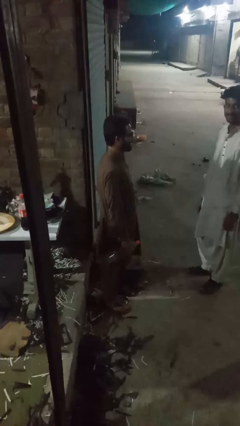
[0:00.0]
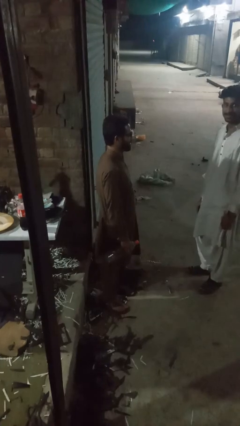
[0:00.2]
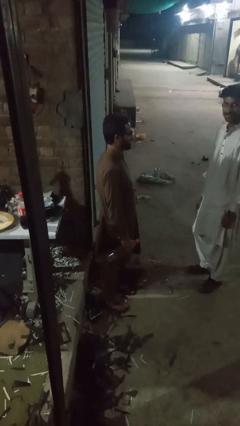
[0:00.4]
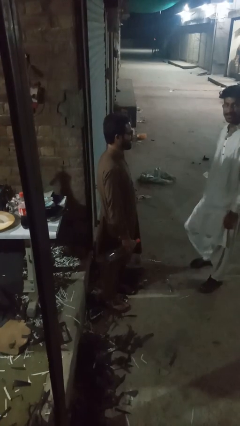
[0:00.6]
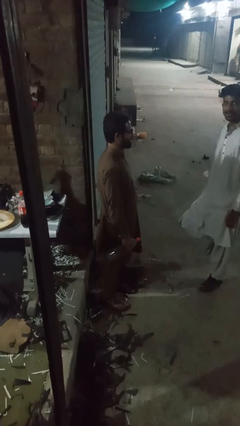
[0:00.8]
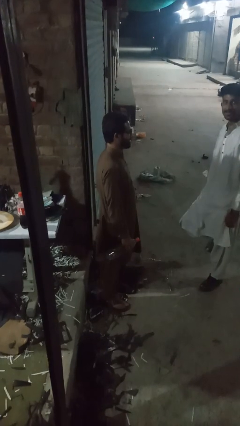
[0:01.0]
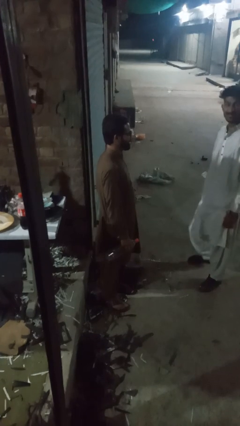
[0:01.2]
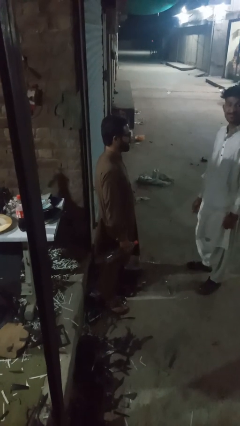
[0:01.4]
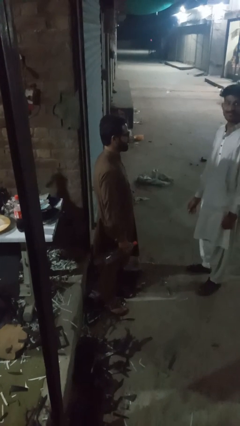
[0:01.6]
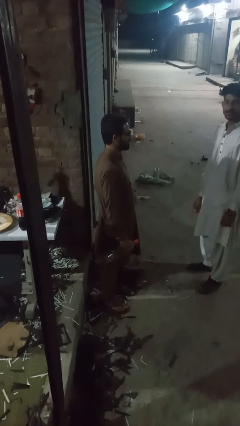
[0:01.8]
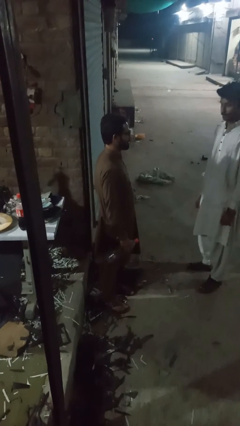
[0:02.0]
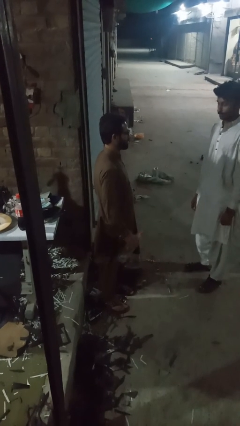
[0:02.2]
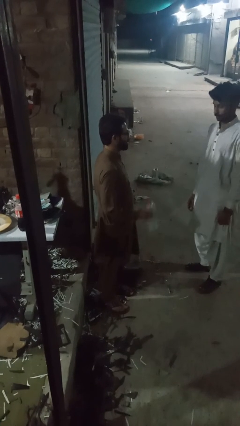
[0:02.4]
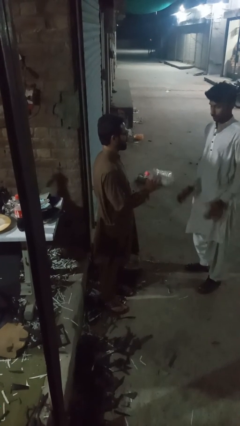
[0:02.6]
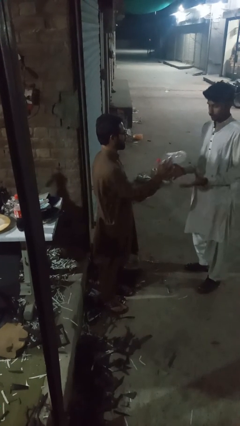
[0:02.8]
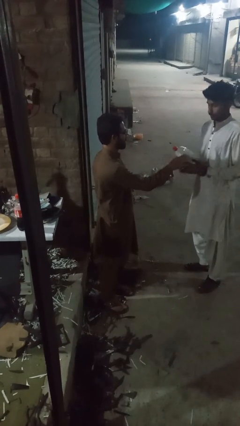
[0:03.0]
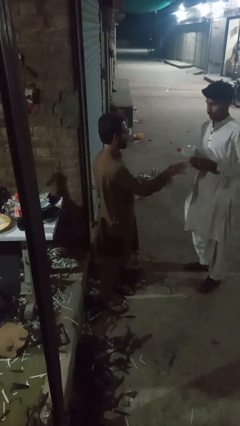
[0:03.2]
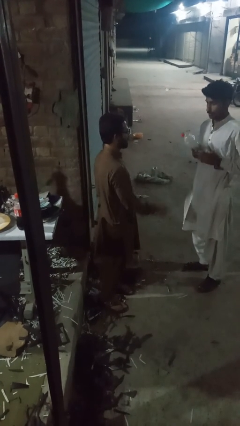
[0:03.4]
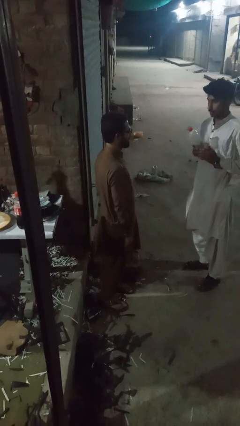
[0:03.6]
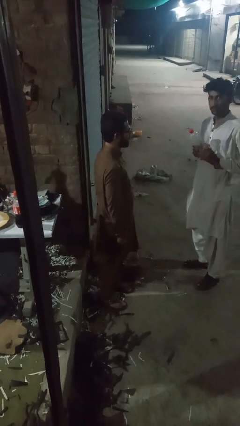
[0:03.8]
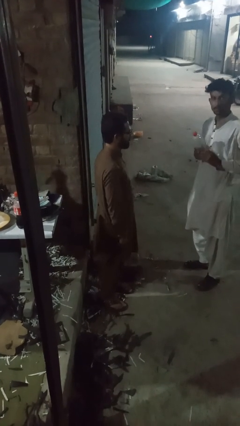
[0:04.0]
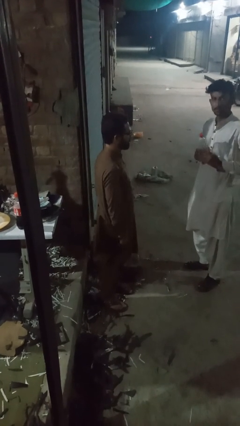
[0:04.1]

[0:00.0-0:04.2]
person throws object to person

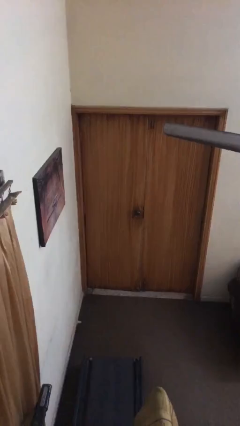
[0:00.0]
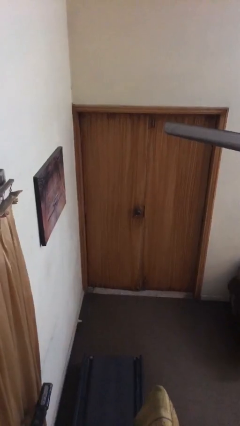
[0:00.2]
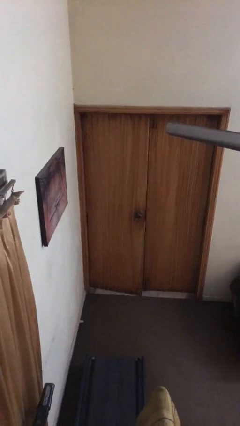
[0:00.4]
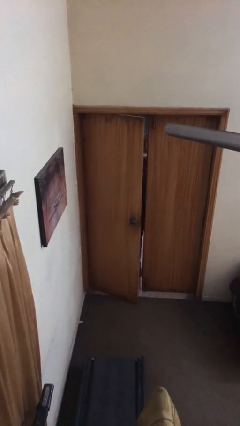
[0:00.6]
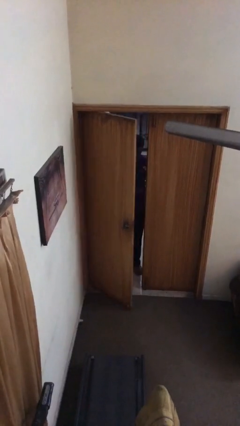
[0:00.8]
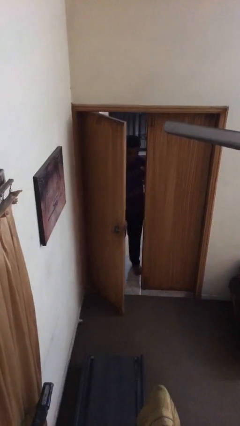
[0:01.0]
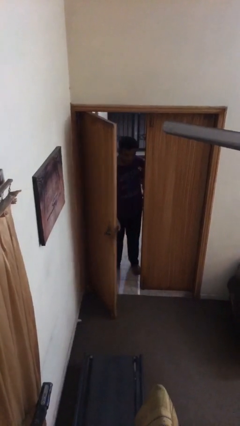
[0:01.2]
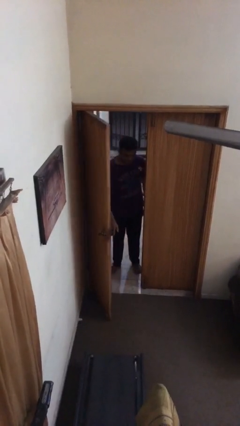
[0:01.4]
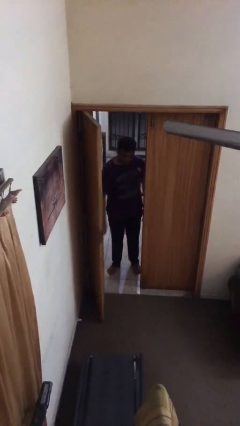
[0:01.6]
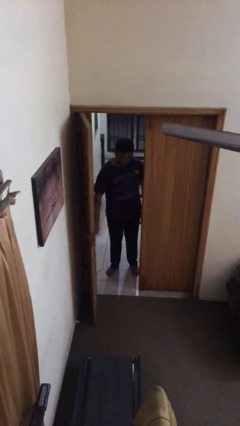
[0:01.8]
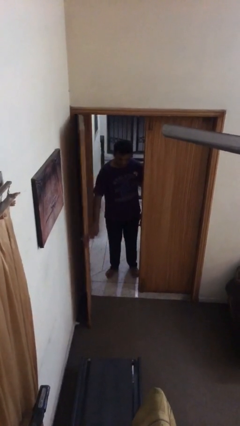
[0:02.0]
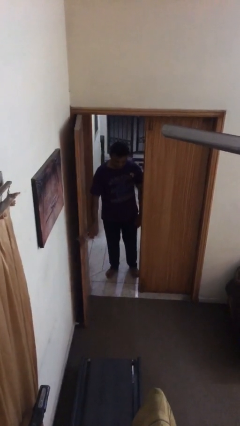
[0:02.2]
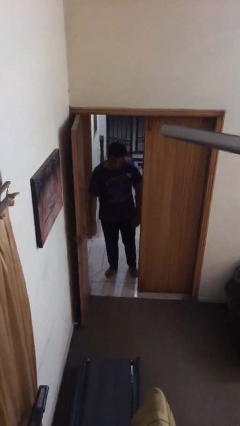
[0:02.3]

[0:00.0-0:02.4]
person opens facility door

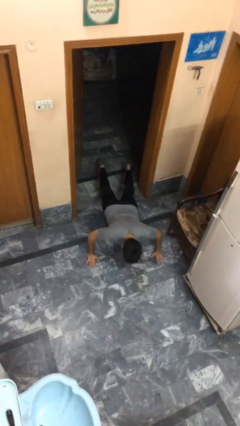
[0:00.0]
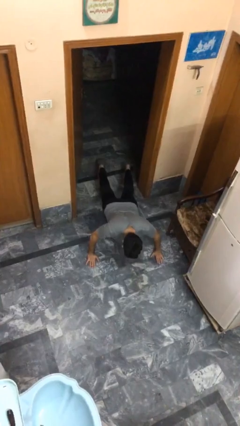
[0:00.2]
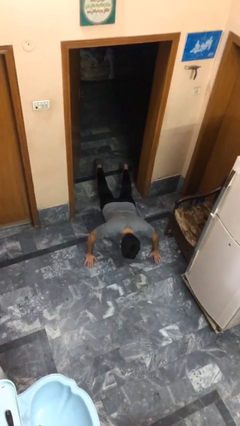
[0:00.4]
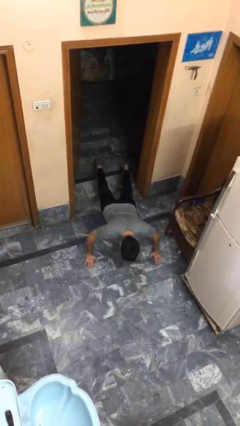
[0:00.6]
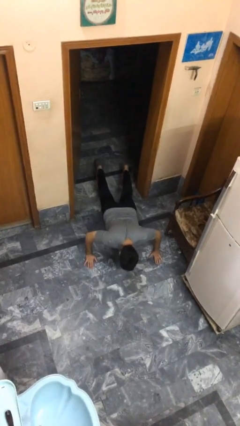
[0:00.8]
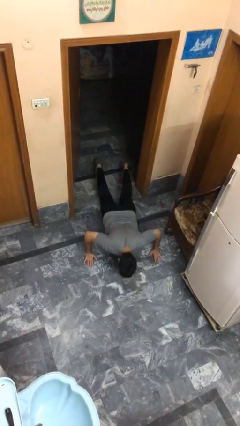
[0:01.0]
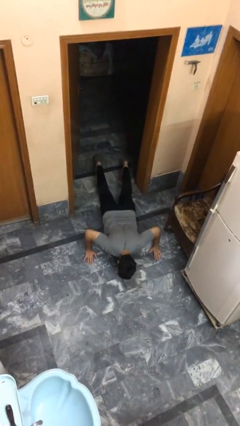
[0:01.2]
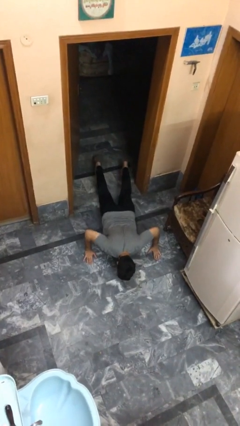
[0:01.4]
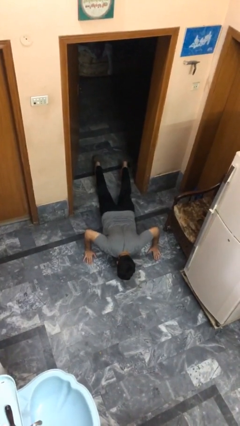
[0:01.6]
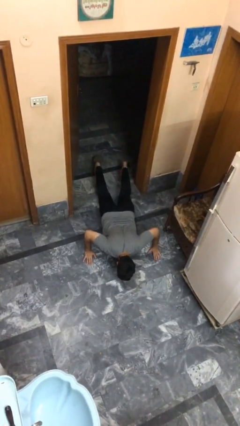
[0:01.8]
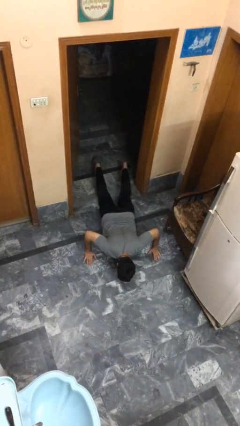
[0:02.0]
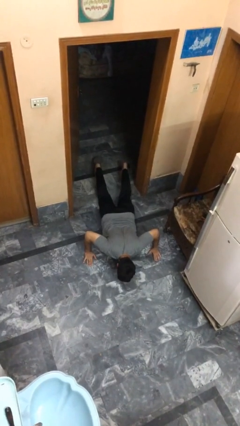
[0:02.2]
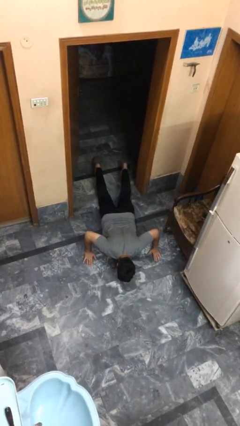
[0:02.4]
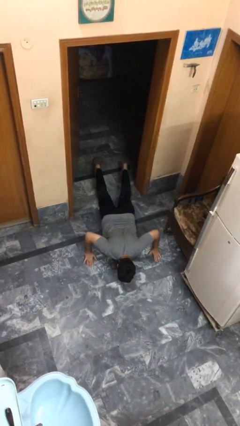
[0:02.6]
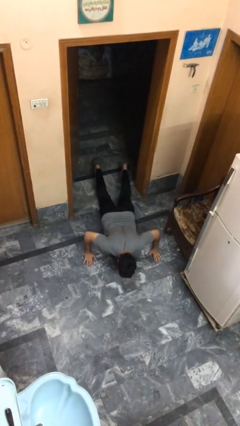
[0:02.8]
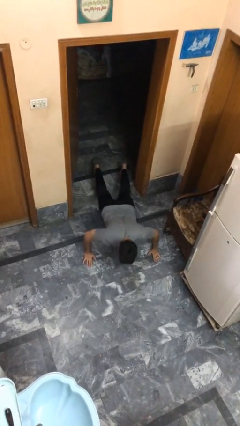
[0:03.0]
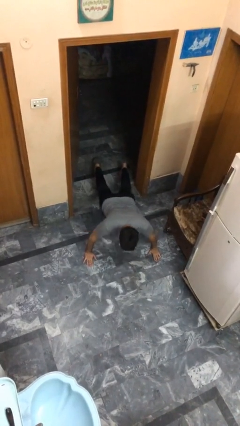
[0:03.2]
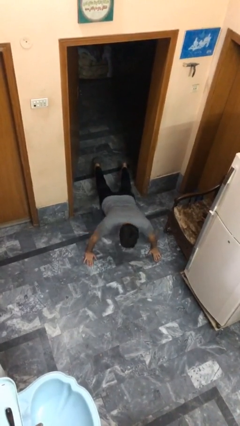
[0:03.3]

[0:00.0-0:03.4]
person exercises with pushup

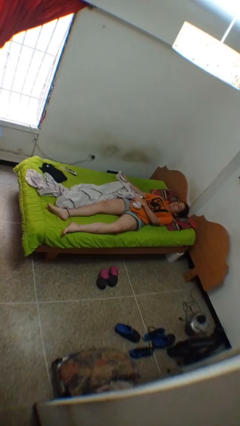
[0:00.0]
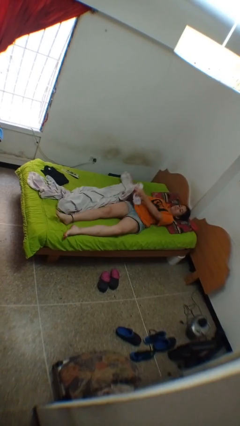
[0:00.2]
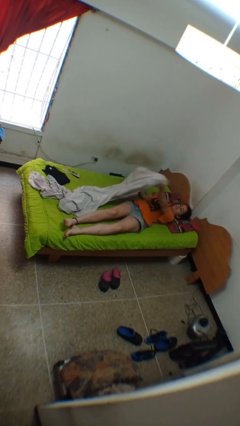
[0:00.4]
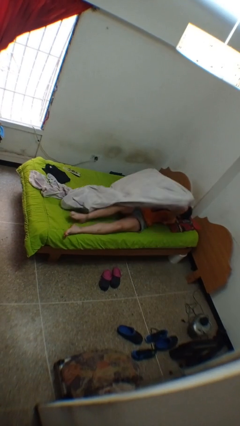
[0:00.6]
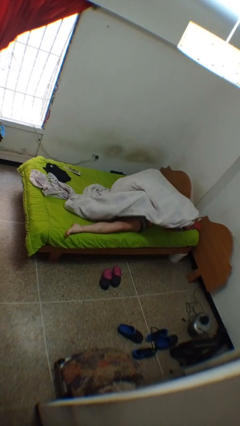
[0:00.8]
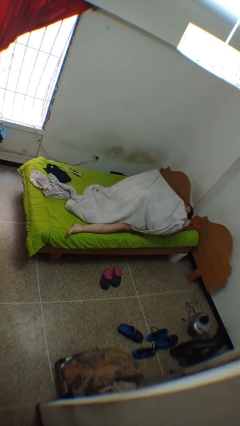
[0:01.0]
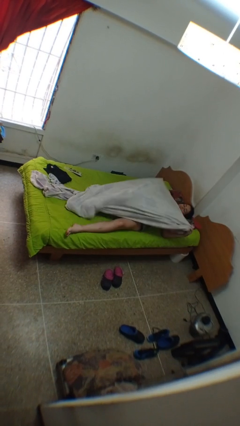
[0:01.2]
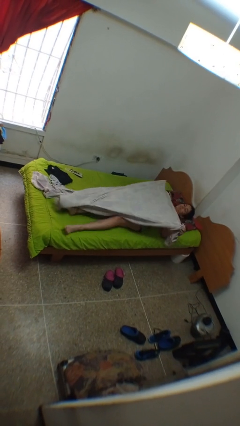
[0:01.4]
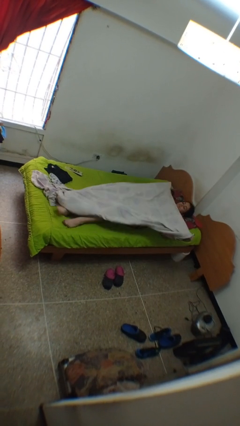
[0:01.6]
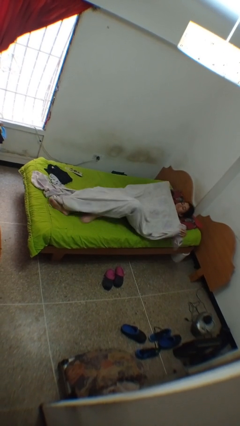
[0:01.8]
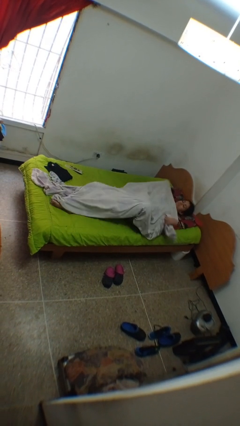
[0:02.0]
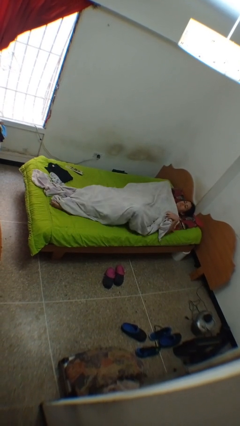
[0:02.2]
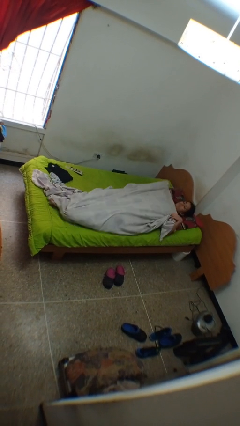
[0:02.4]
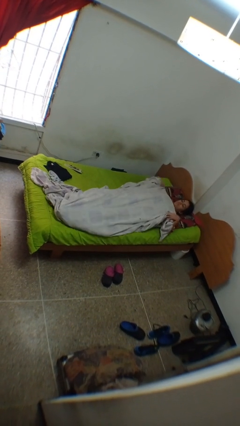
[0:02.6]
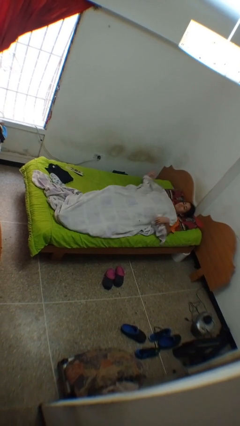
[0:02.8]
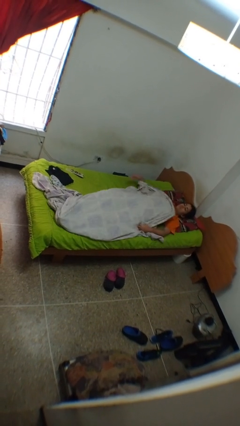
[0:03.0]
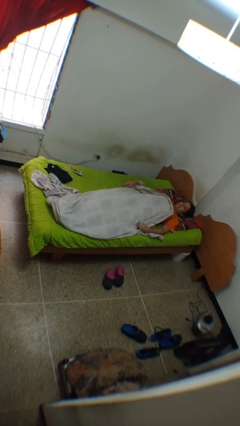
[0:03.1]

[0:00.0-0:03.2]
person covers with bedsheets

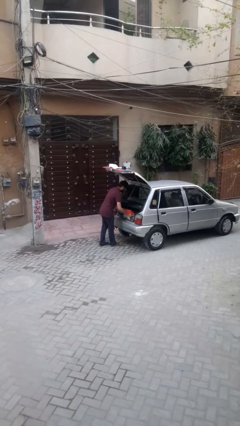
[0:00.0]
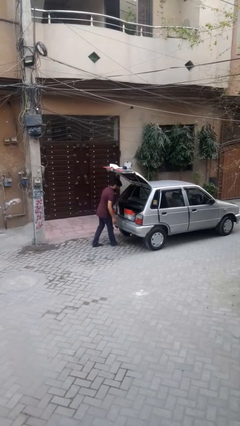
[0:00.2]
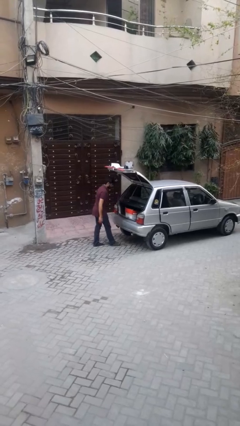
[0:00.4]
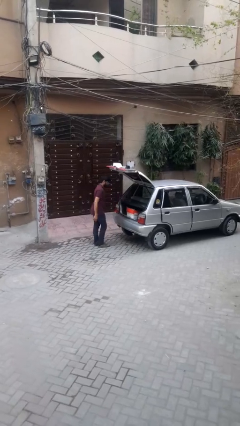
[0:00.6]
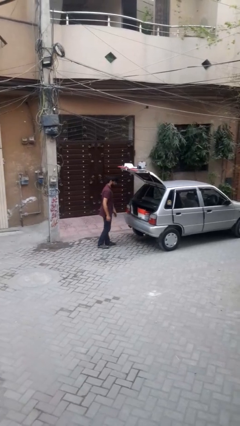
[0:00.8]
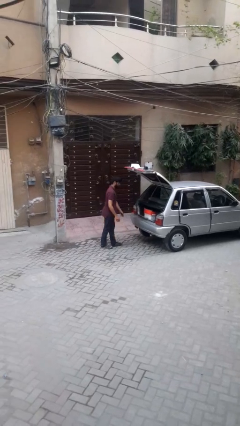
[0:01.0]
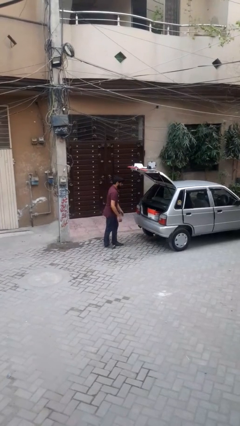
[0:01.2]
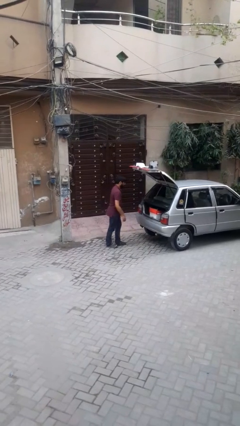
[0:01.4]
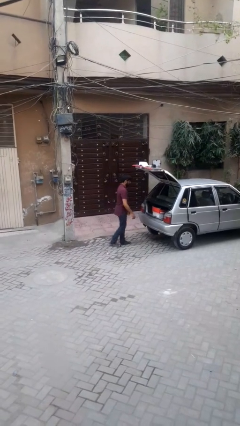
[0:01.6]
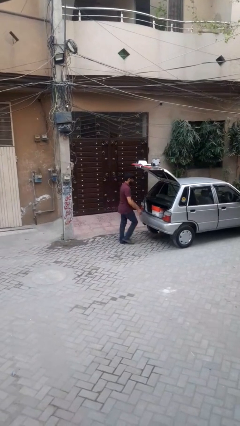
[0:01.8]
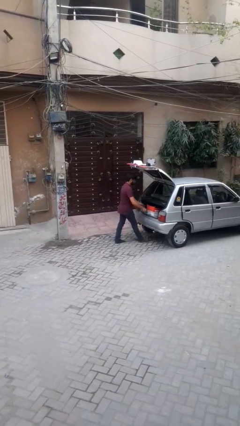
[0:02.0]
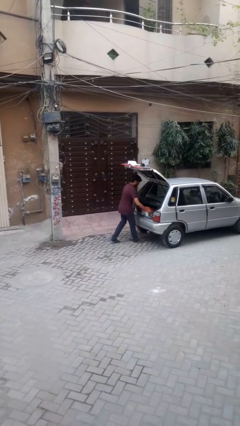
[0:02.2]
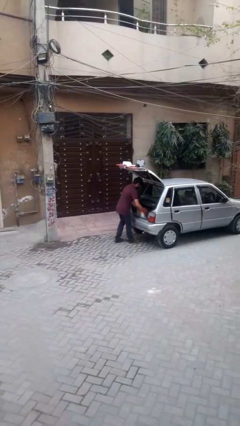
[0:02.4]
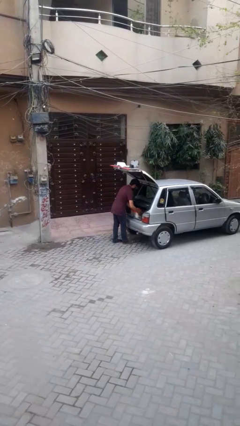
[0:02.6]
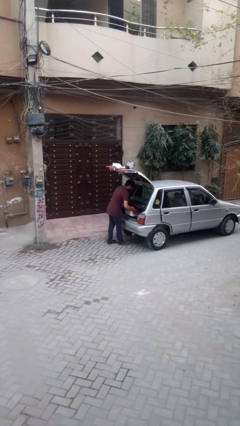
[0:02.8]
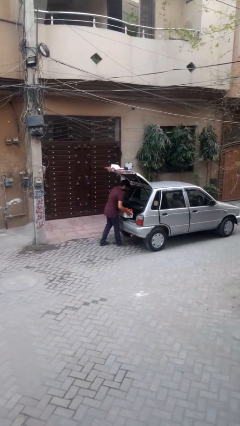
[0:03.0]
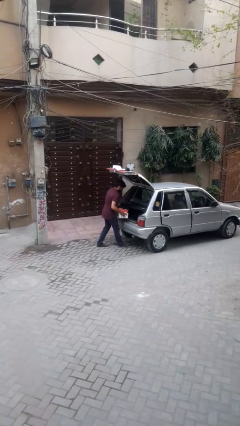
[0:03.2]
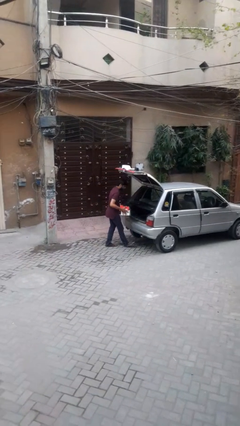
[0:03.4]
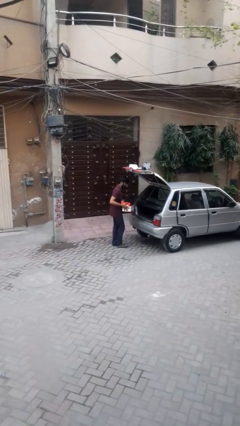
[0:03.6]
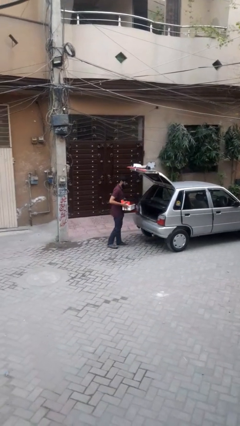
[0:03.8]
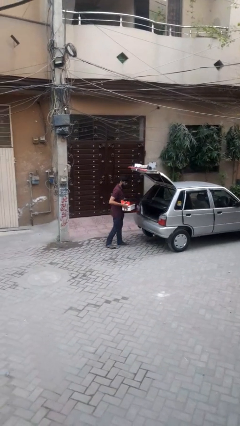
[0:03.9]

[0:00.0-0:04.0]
person unloads car
